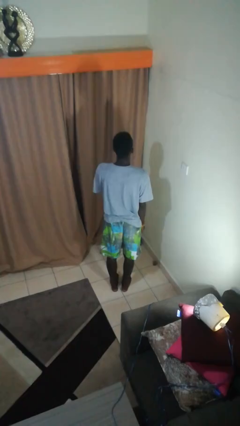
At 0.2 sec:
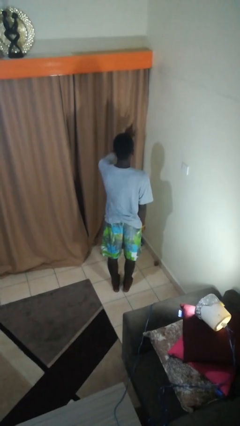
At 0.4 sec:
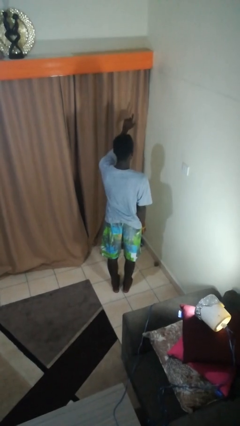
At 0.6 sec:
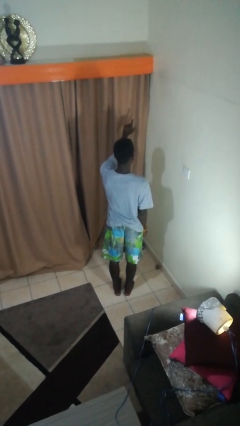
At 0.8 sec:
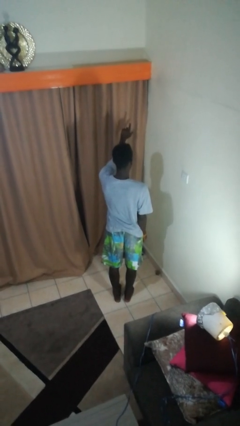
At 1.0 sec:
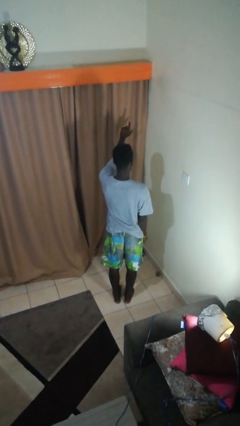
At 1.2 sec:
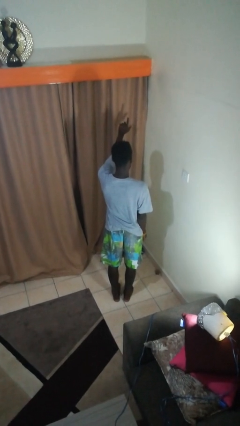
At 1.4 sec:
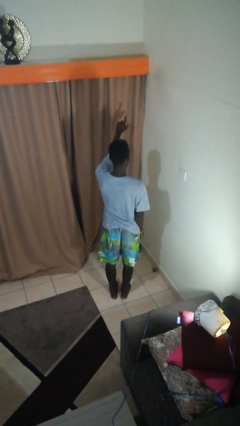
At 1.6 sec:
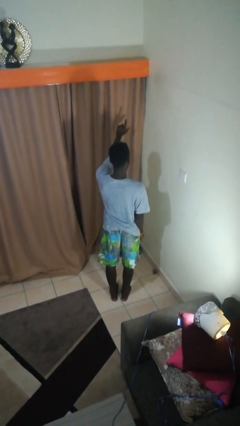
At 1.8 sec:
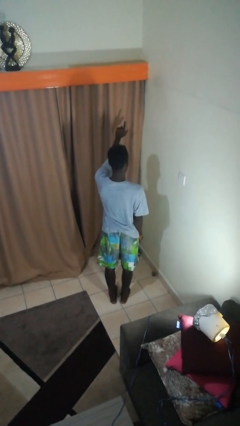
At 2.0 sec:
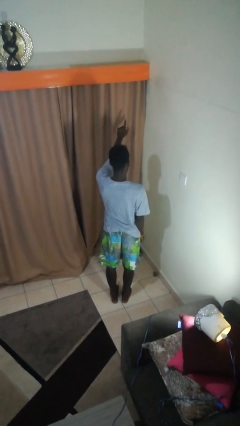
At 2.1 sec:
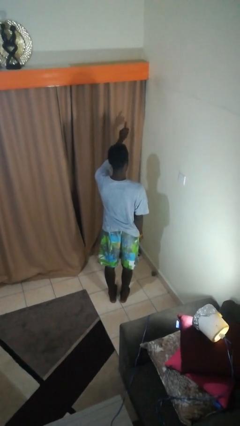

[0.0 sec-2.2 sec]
person gestures number one

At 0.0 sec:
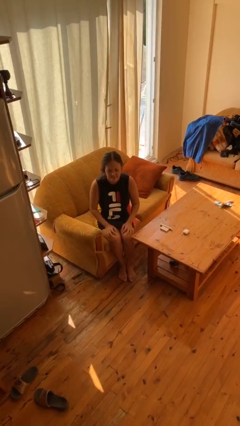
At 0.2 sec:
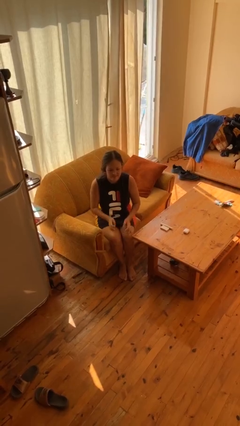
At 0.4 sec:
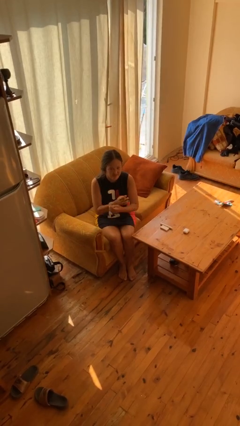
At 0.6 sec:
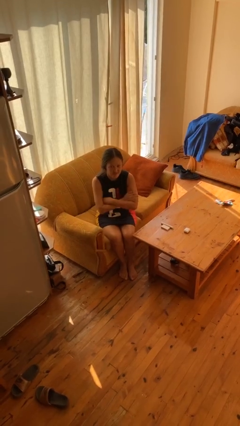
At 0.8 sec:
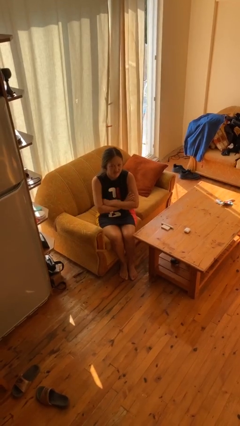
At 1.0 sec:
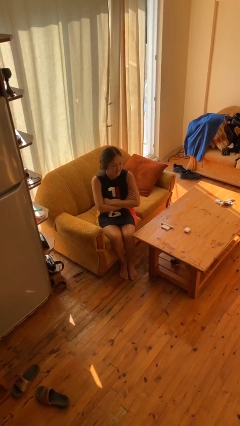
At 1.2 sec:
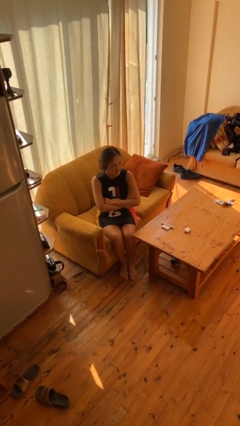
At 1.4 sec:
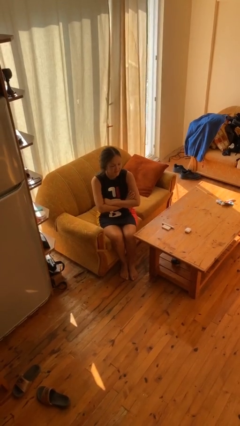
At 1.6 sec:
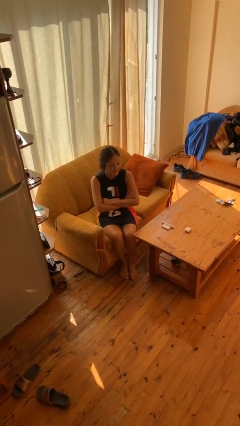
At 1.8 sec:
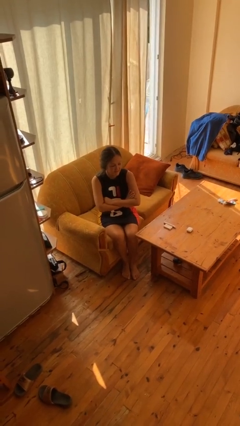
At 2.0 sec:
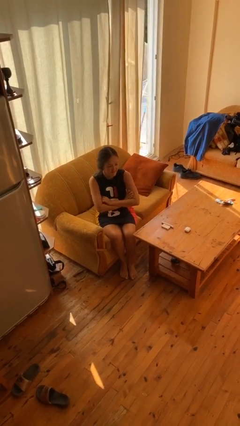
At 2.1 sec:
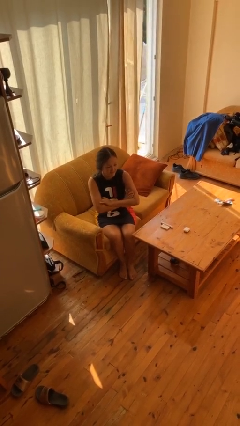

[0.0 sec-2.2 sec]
person crosses arms

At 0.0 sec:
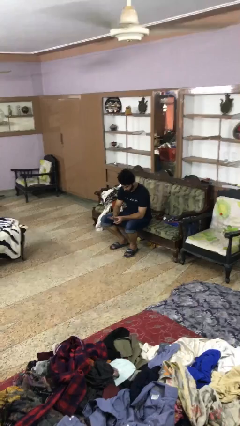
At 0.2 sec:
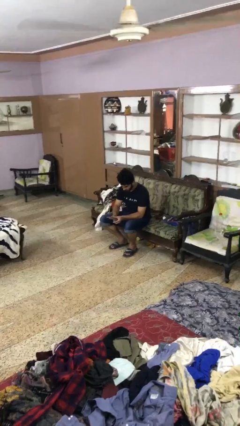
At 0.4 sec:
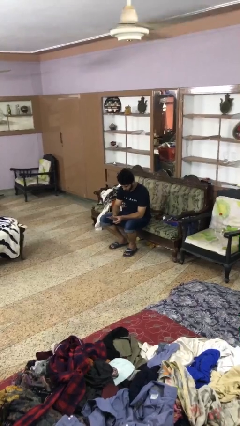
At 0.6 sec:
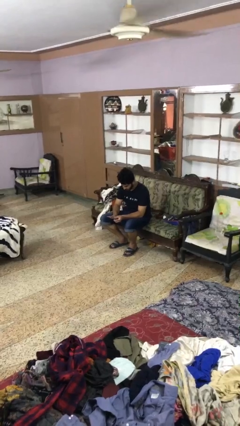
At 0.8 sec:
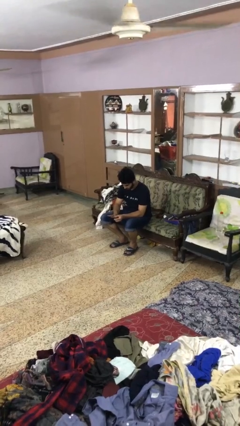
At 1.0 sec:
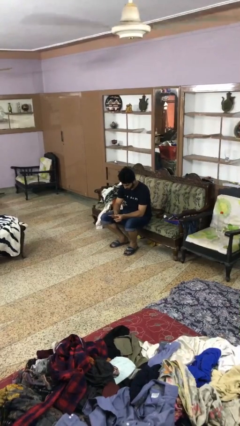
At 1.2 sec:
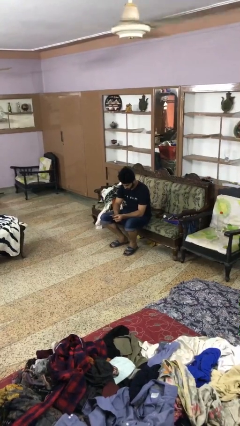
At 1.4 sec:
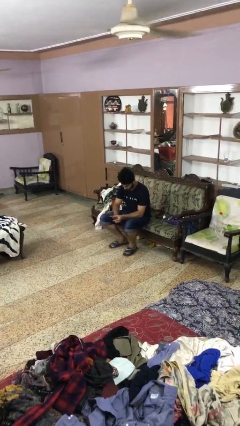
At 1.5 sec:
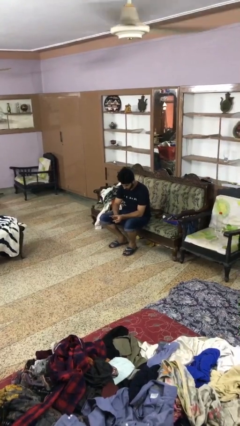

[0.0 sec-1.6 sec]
person clips fingernails

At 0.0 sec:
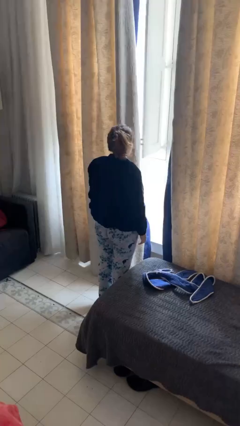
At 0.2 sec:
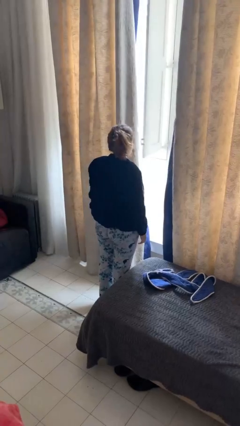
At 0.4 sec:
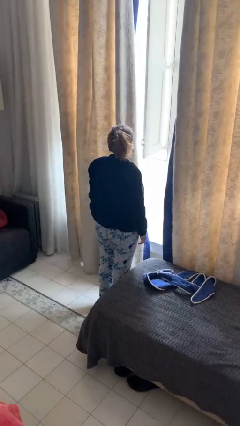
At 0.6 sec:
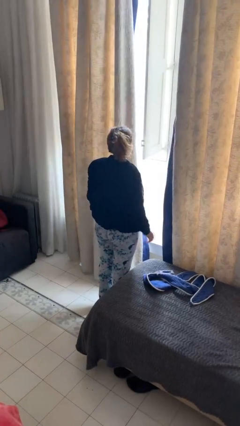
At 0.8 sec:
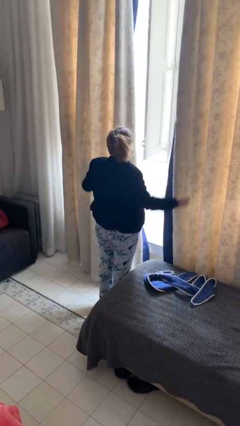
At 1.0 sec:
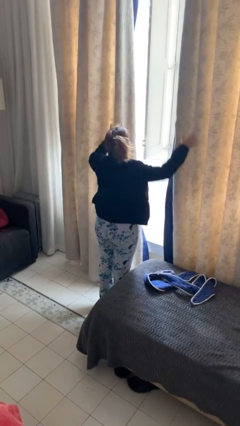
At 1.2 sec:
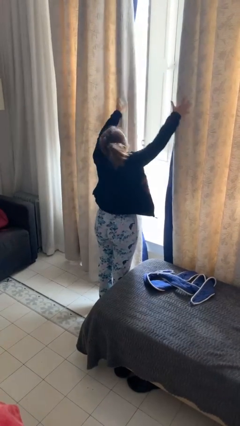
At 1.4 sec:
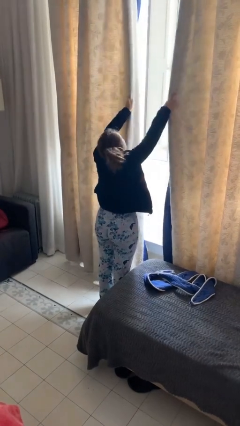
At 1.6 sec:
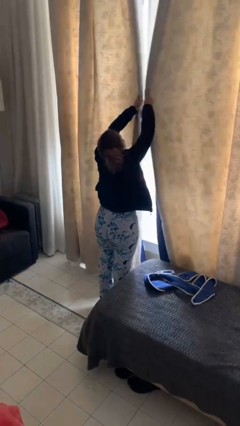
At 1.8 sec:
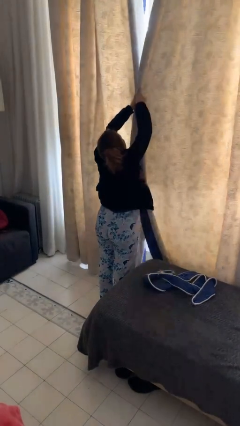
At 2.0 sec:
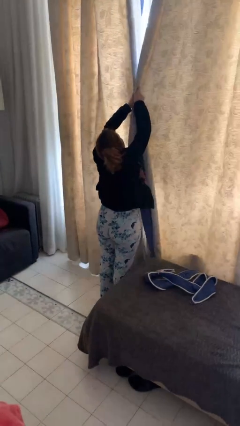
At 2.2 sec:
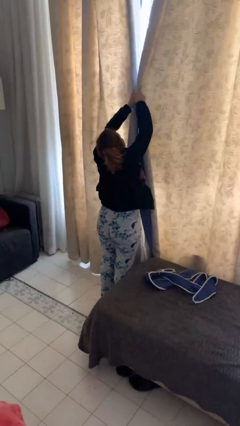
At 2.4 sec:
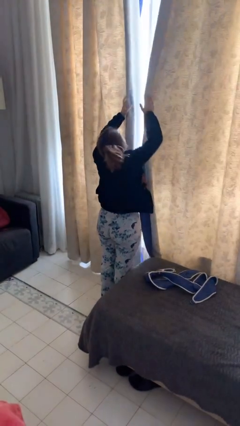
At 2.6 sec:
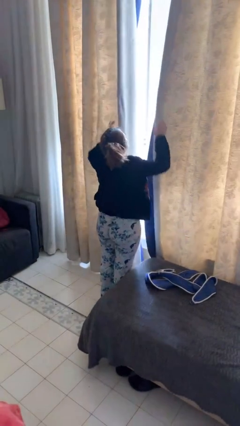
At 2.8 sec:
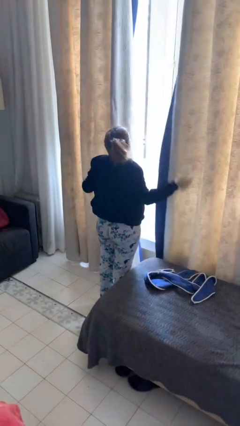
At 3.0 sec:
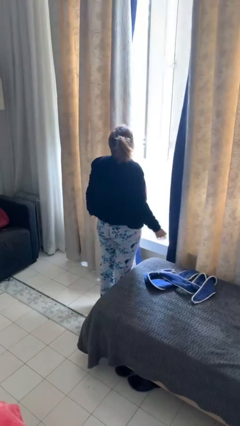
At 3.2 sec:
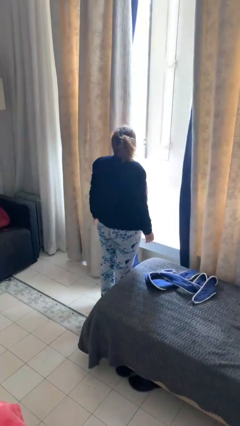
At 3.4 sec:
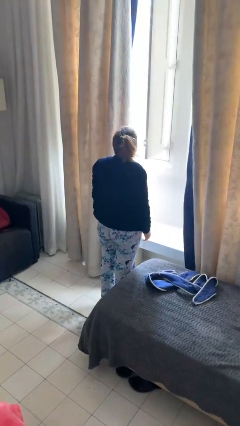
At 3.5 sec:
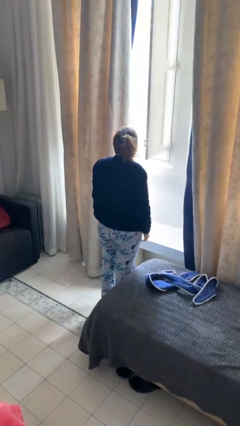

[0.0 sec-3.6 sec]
person closes curtains

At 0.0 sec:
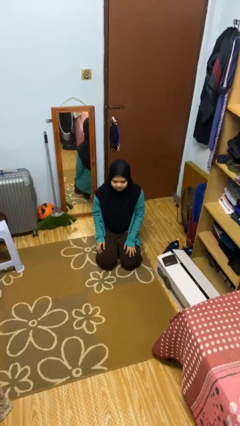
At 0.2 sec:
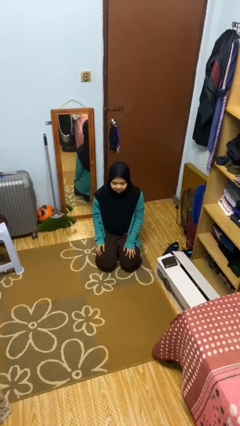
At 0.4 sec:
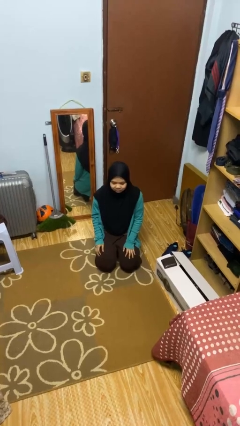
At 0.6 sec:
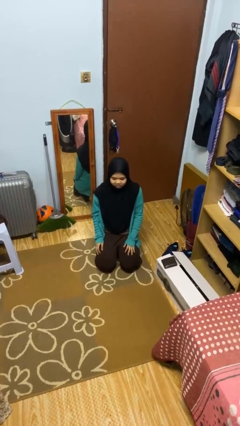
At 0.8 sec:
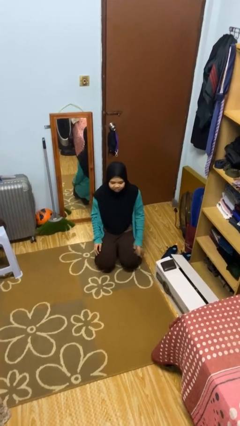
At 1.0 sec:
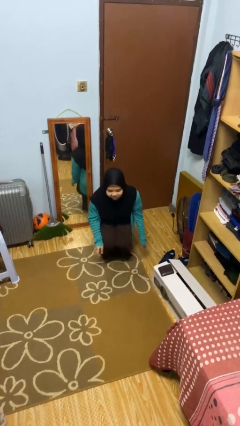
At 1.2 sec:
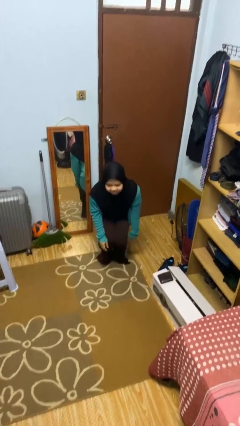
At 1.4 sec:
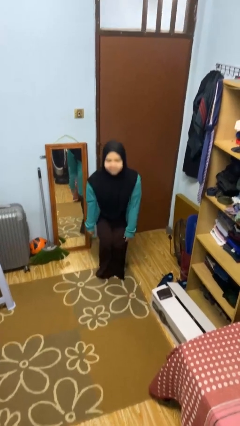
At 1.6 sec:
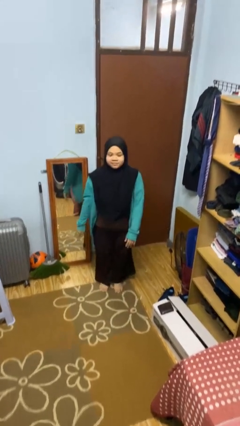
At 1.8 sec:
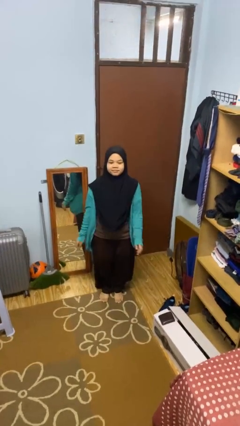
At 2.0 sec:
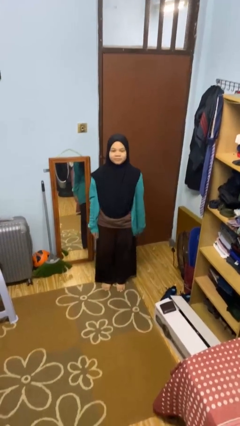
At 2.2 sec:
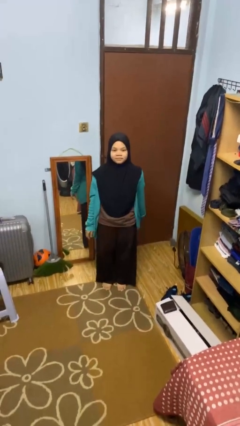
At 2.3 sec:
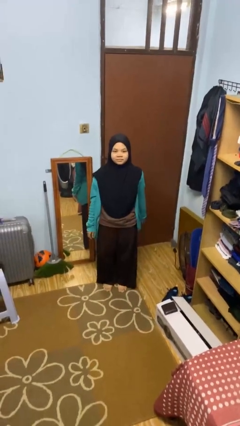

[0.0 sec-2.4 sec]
person stands up from floor

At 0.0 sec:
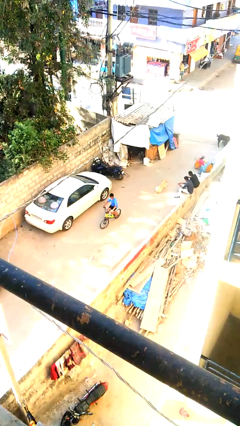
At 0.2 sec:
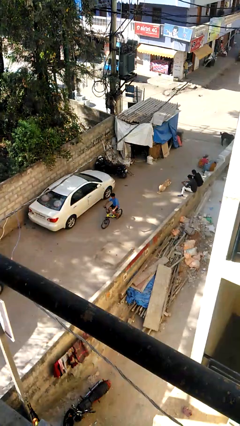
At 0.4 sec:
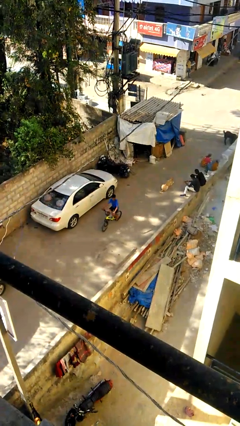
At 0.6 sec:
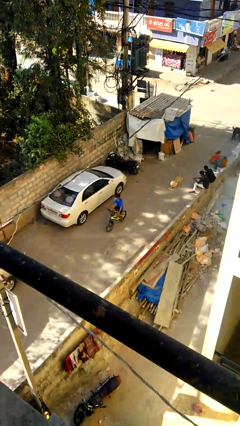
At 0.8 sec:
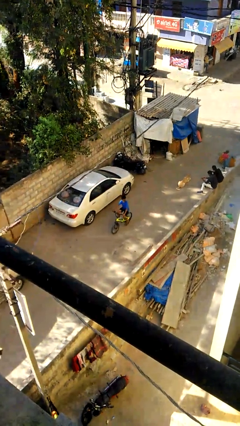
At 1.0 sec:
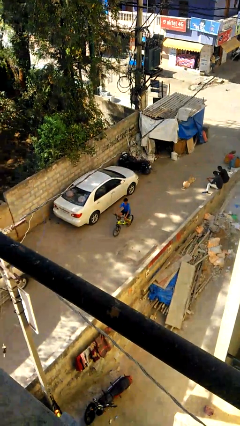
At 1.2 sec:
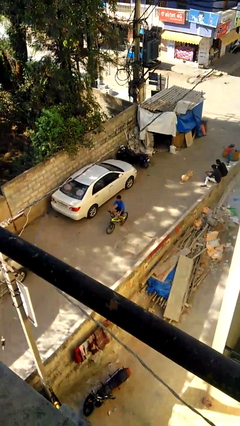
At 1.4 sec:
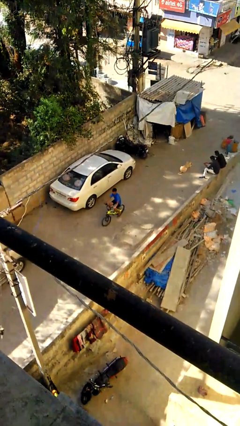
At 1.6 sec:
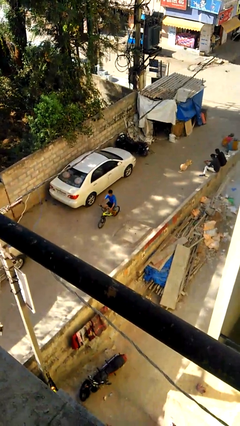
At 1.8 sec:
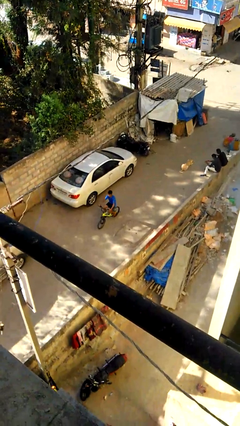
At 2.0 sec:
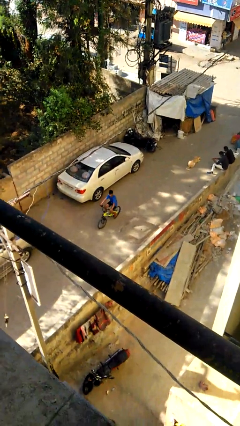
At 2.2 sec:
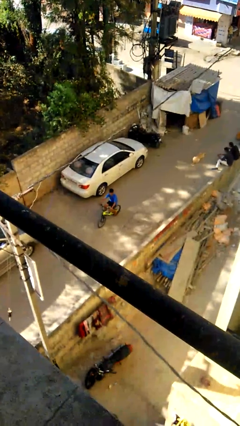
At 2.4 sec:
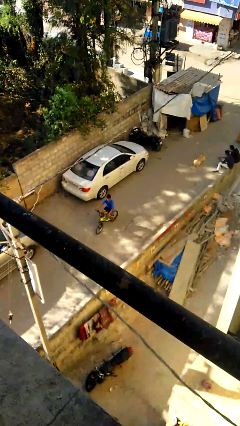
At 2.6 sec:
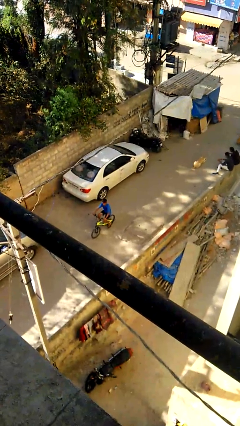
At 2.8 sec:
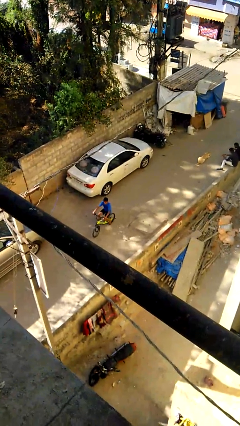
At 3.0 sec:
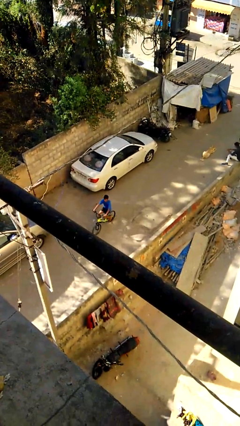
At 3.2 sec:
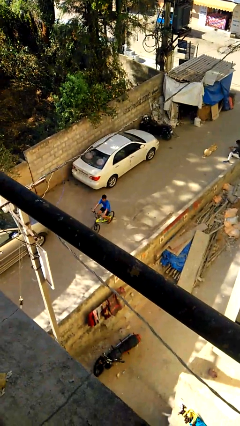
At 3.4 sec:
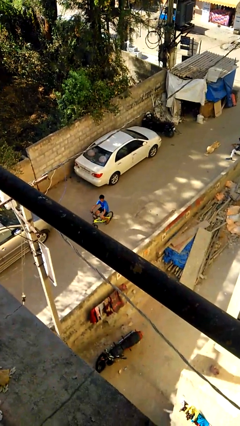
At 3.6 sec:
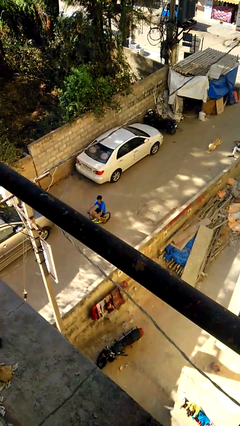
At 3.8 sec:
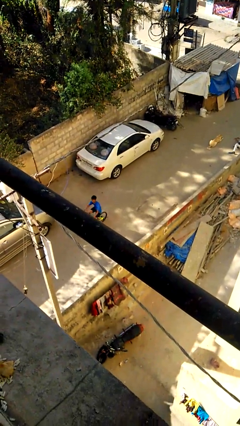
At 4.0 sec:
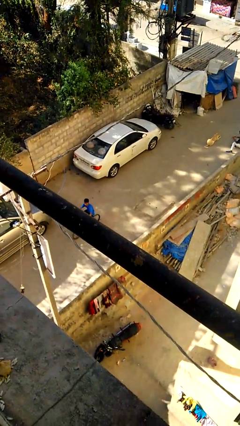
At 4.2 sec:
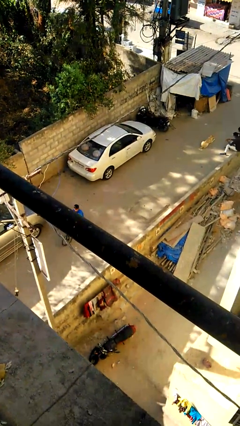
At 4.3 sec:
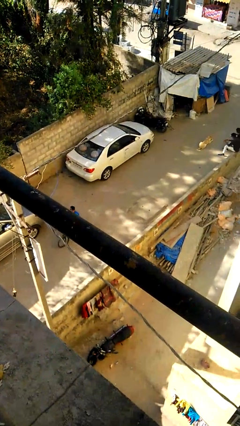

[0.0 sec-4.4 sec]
person rides bicycle

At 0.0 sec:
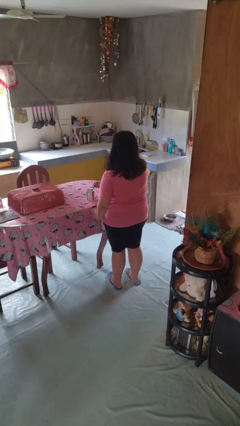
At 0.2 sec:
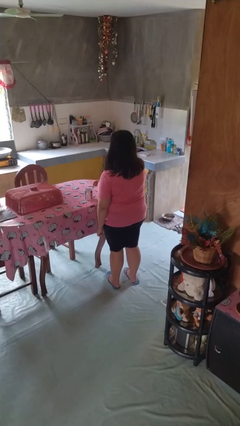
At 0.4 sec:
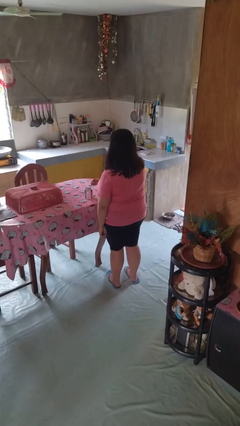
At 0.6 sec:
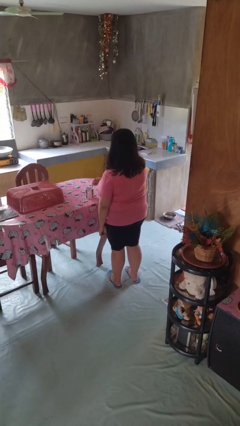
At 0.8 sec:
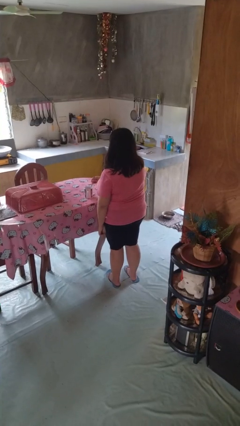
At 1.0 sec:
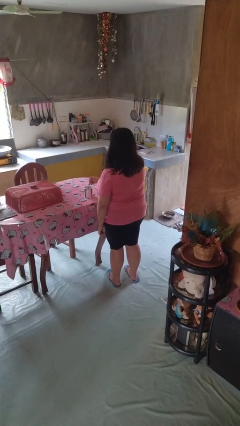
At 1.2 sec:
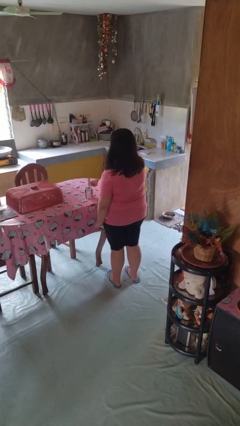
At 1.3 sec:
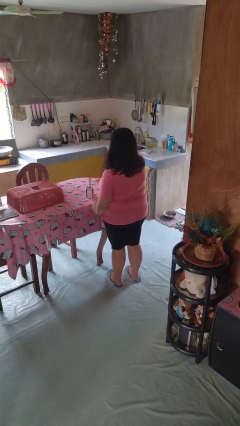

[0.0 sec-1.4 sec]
person stirs mug
